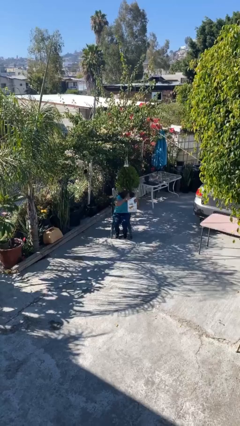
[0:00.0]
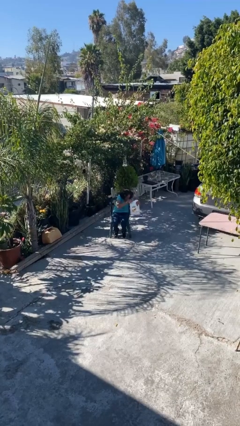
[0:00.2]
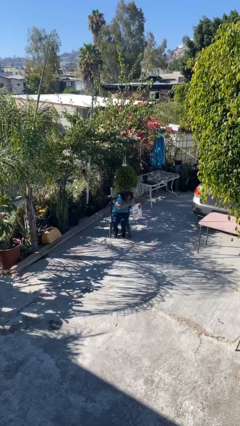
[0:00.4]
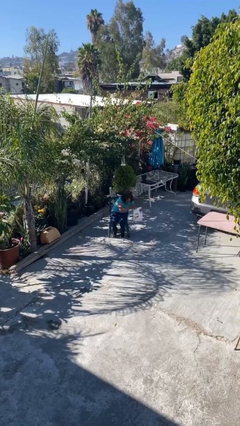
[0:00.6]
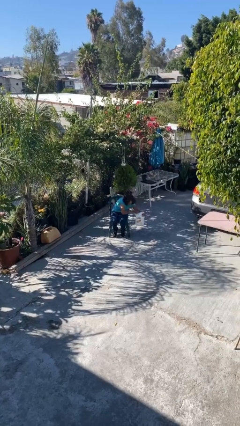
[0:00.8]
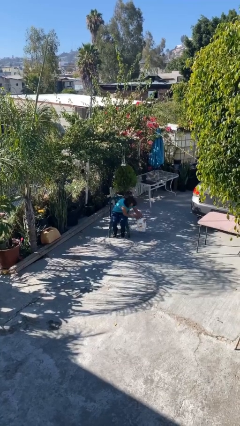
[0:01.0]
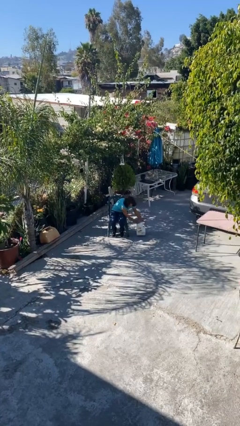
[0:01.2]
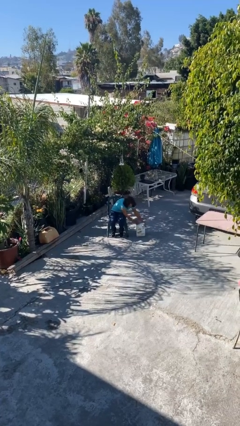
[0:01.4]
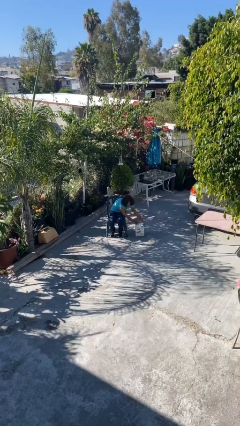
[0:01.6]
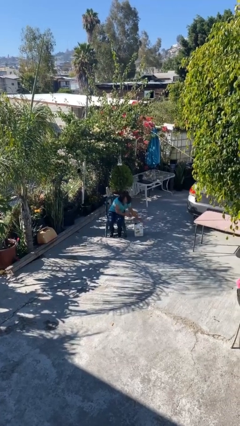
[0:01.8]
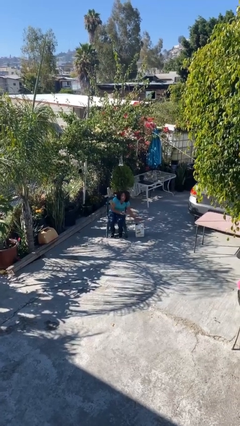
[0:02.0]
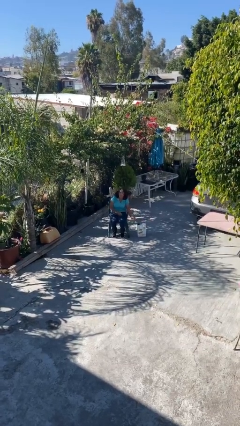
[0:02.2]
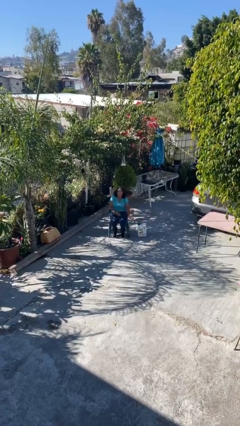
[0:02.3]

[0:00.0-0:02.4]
person puts down object on floor

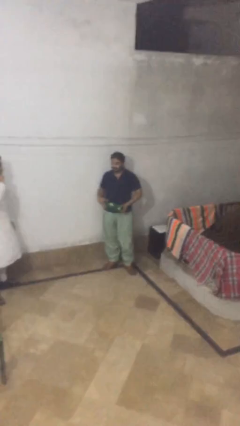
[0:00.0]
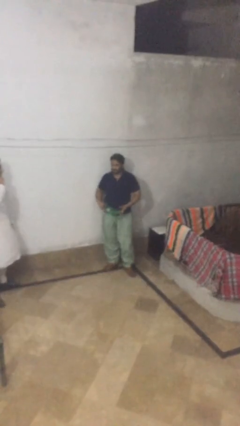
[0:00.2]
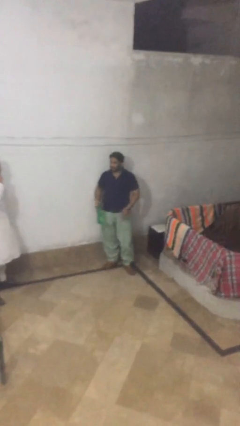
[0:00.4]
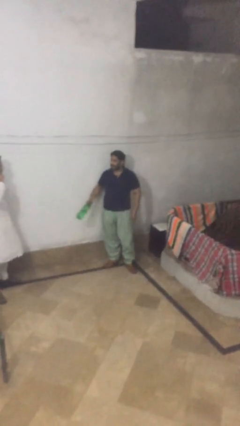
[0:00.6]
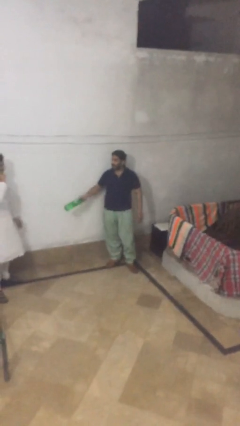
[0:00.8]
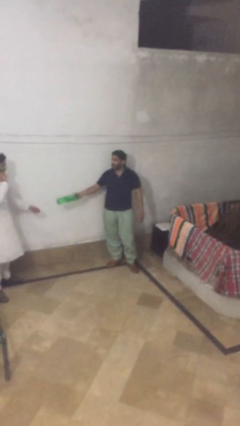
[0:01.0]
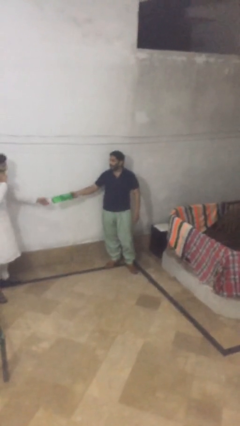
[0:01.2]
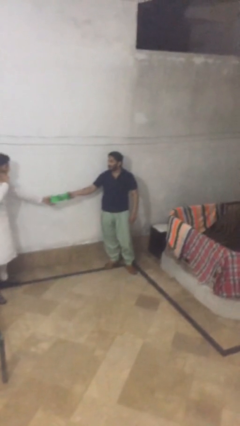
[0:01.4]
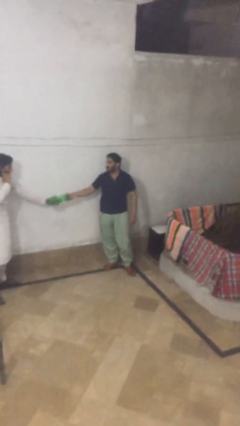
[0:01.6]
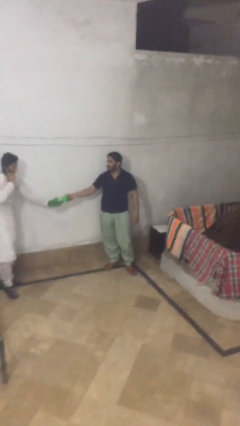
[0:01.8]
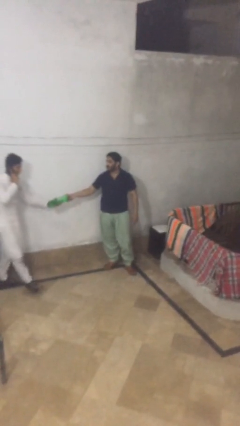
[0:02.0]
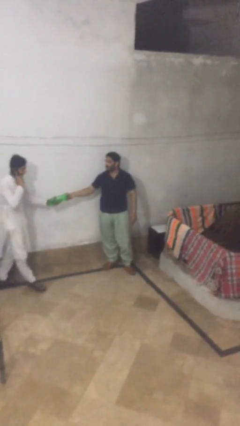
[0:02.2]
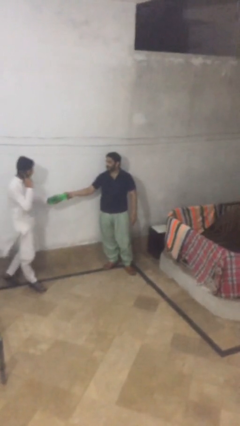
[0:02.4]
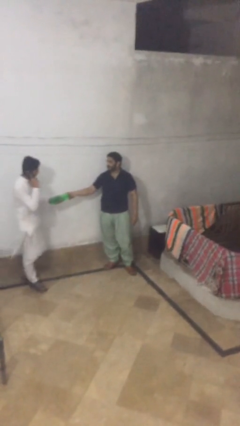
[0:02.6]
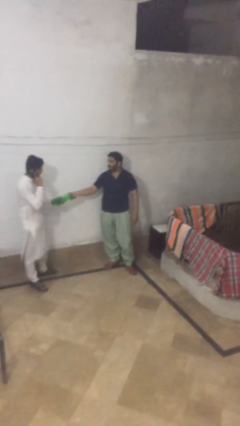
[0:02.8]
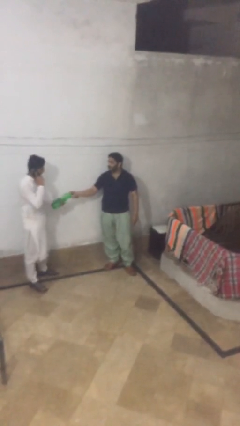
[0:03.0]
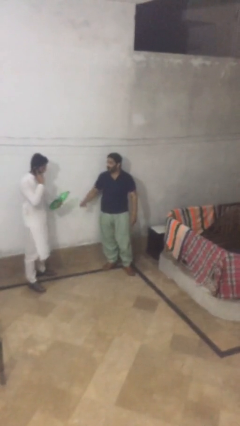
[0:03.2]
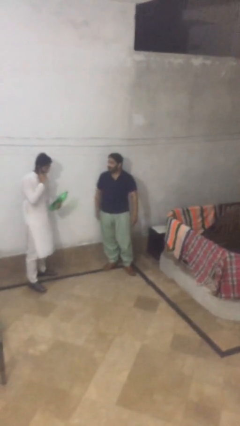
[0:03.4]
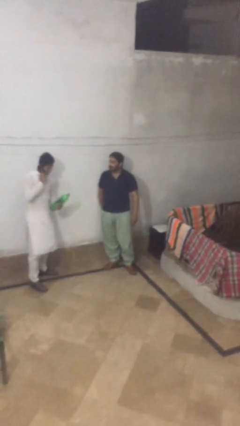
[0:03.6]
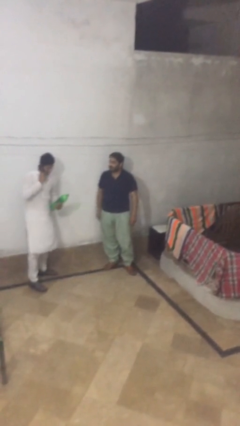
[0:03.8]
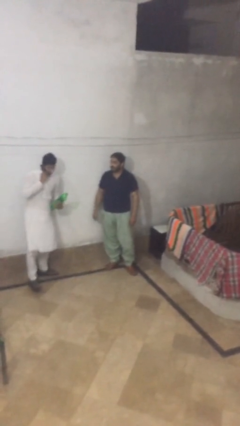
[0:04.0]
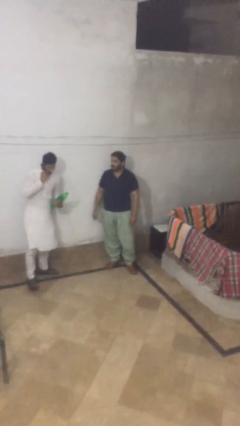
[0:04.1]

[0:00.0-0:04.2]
person transfers object to person

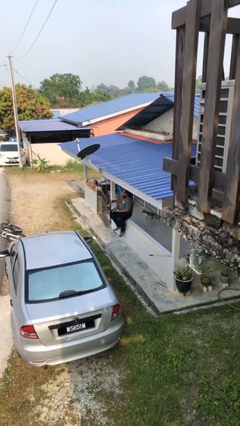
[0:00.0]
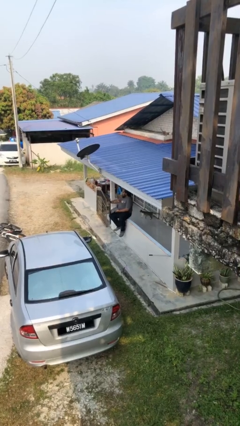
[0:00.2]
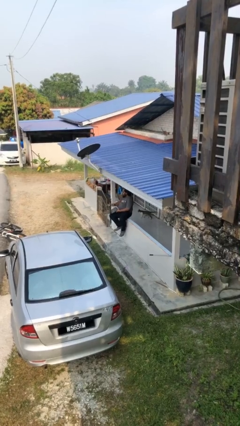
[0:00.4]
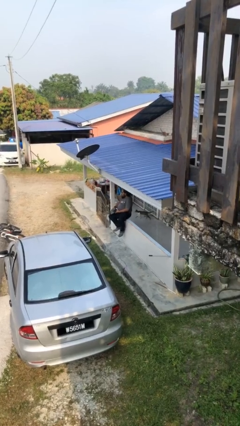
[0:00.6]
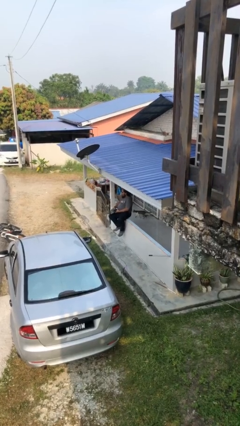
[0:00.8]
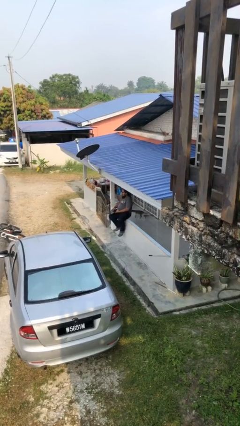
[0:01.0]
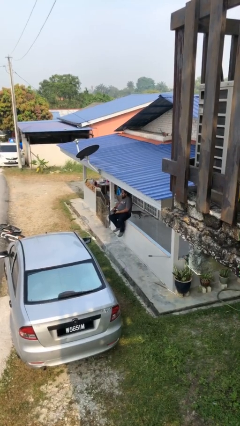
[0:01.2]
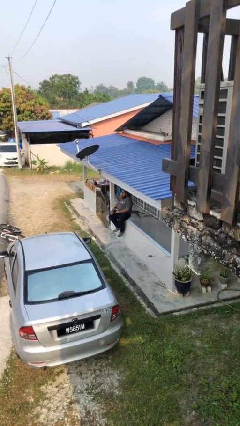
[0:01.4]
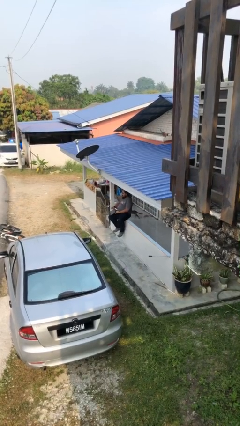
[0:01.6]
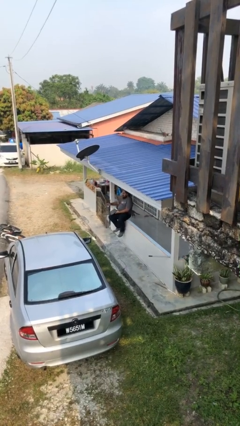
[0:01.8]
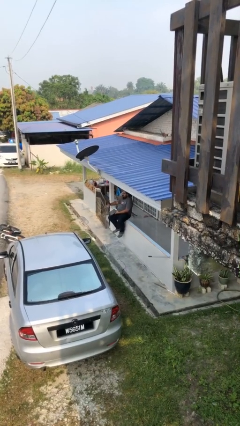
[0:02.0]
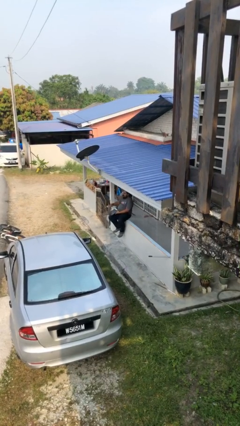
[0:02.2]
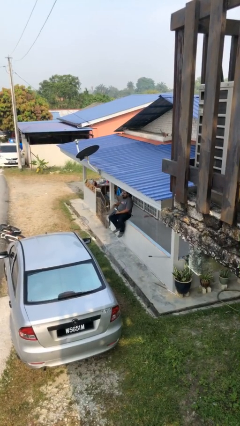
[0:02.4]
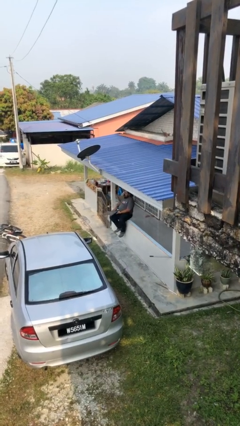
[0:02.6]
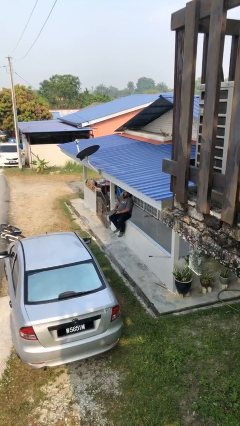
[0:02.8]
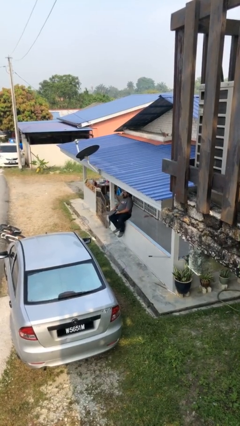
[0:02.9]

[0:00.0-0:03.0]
person interacts with laptop

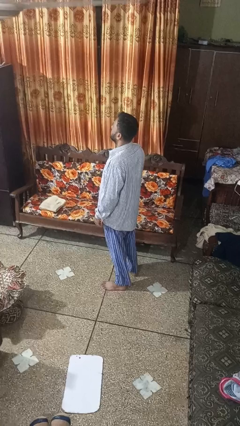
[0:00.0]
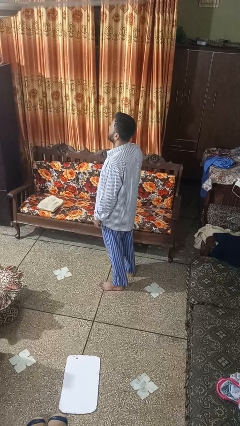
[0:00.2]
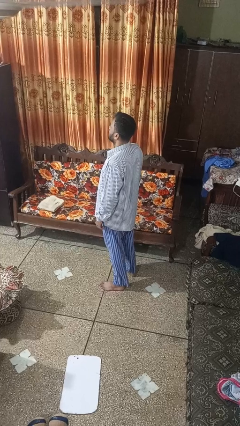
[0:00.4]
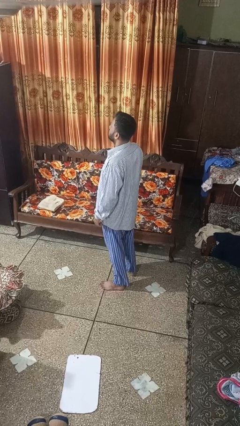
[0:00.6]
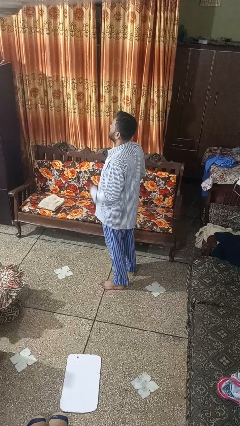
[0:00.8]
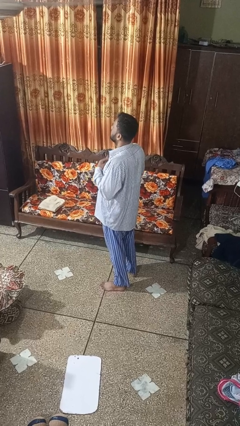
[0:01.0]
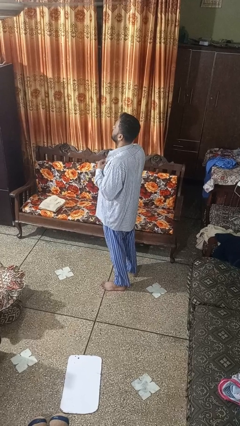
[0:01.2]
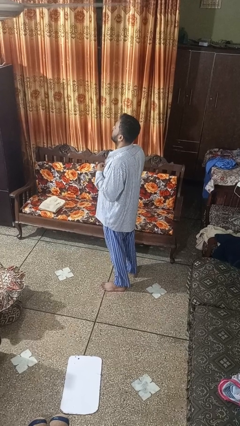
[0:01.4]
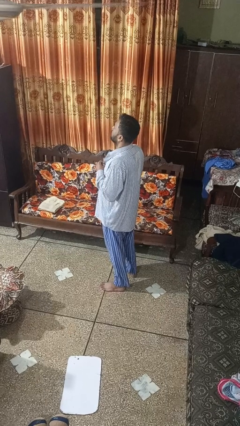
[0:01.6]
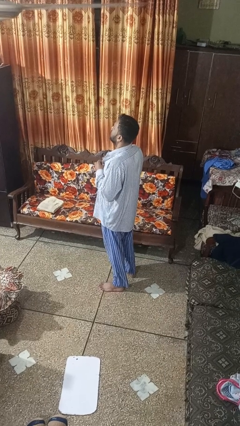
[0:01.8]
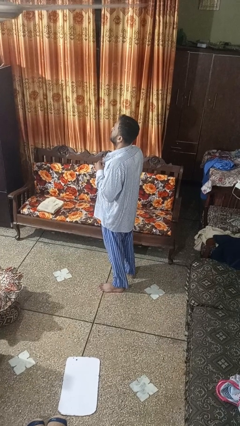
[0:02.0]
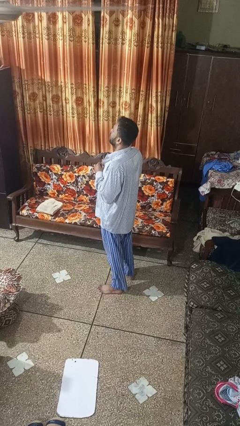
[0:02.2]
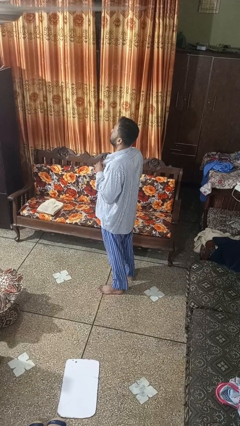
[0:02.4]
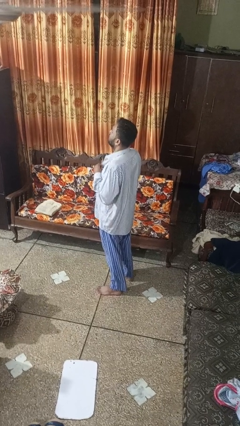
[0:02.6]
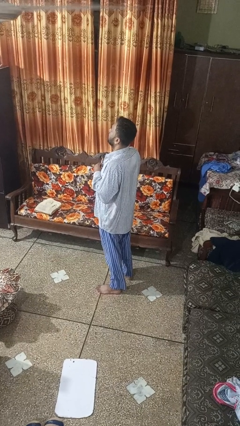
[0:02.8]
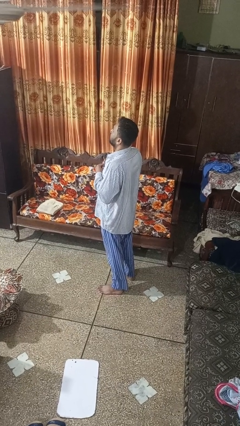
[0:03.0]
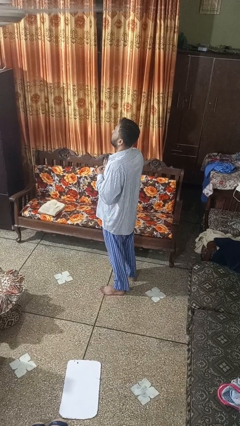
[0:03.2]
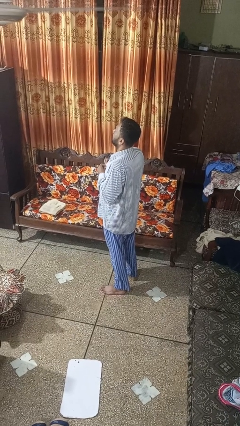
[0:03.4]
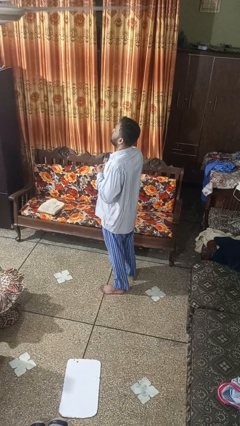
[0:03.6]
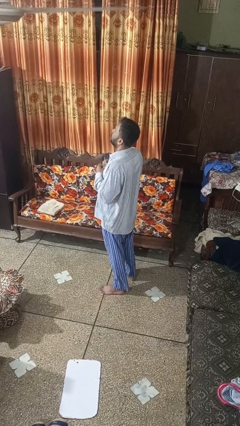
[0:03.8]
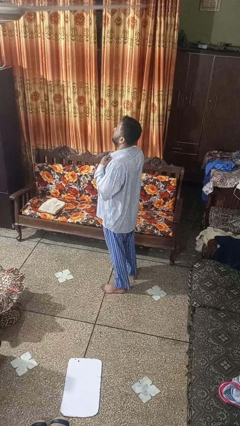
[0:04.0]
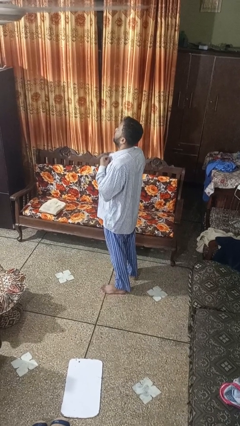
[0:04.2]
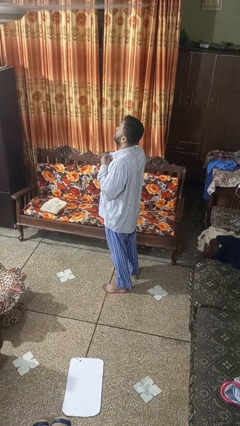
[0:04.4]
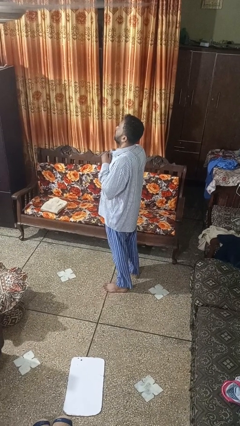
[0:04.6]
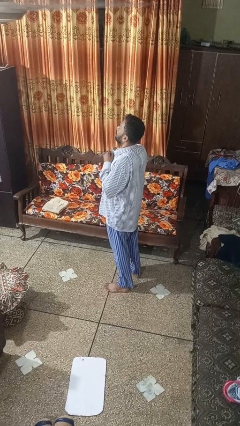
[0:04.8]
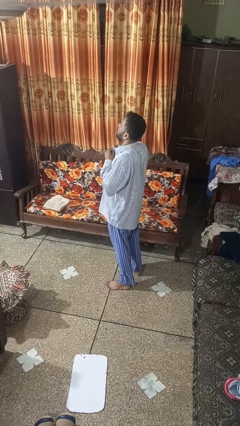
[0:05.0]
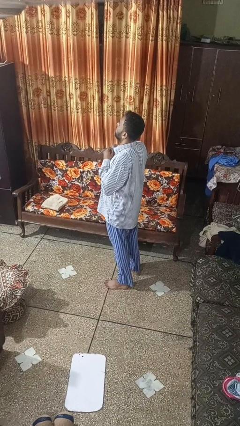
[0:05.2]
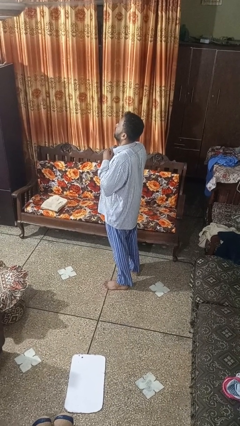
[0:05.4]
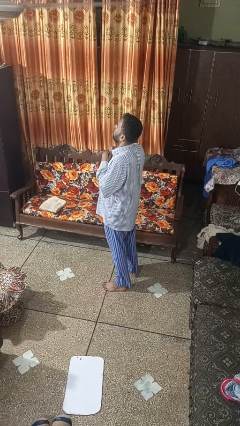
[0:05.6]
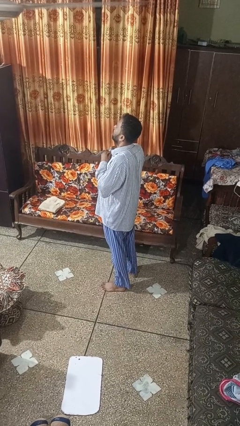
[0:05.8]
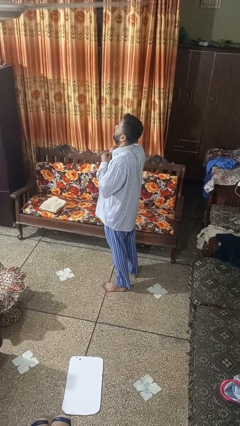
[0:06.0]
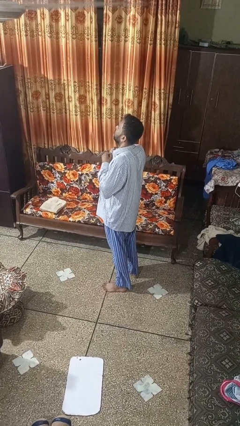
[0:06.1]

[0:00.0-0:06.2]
person buttons shirt

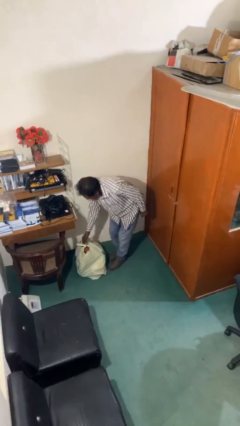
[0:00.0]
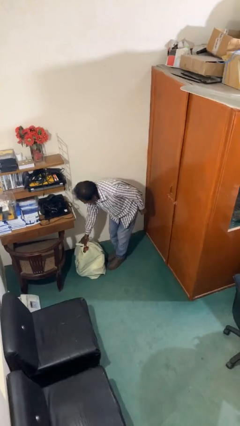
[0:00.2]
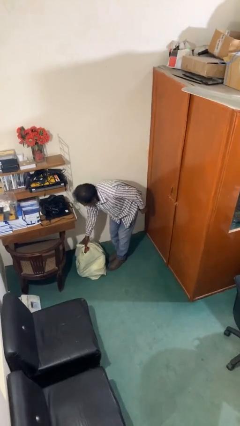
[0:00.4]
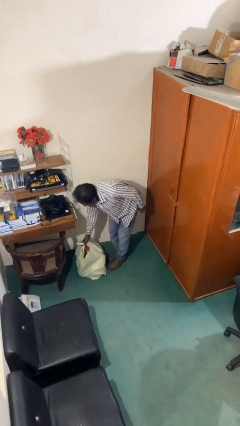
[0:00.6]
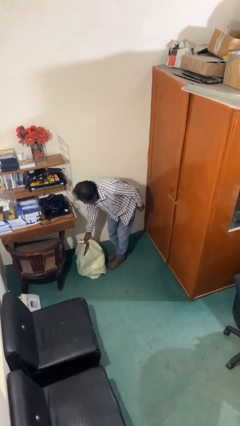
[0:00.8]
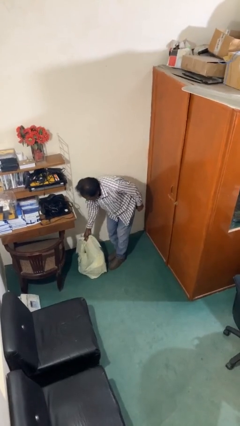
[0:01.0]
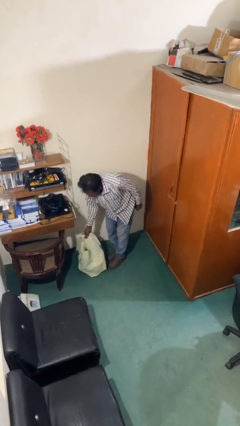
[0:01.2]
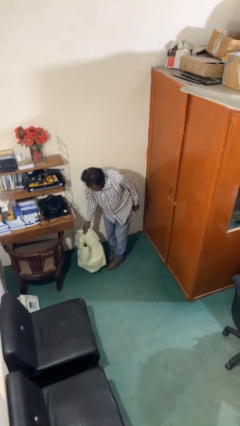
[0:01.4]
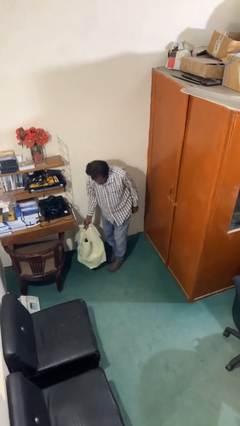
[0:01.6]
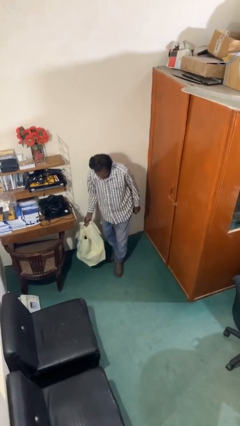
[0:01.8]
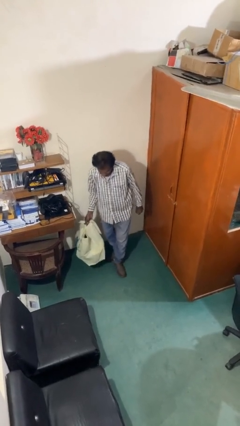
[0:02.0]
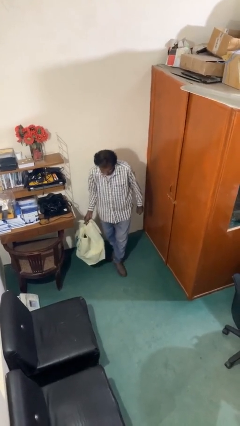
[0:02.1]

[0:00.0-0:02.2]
person picks up object from floor
